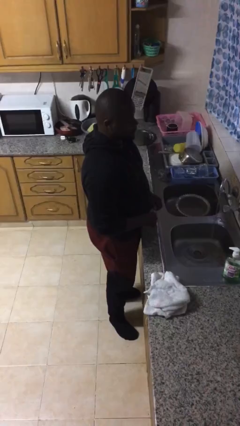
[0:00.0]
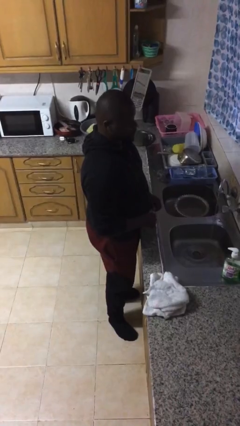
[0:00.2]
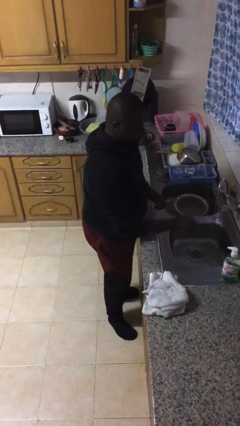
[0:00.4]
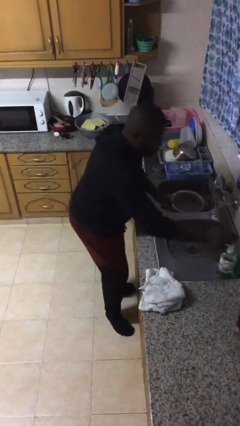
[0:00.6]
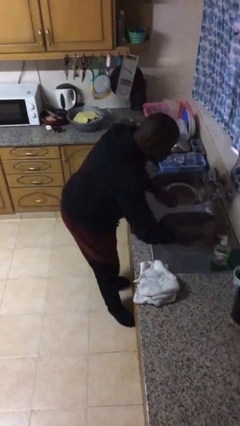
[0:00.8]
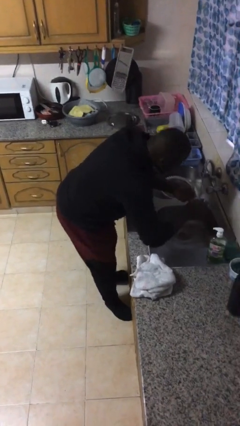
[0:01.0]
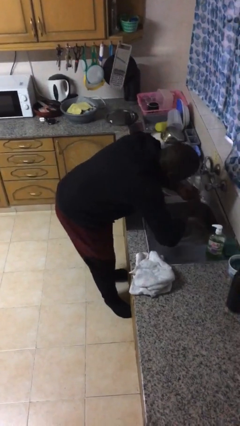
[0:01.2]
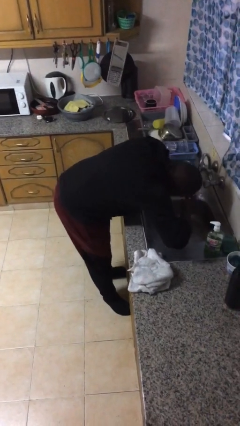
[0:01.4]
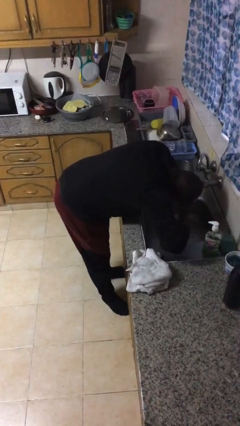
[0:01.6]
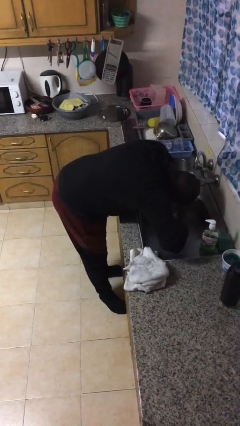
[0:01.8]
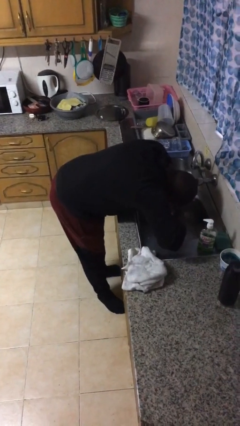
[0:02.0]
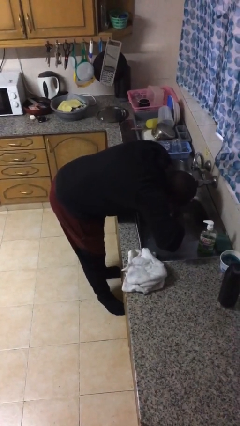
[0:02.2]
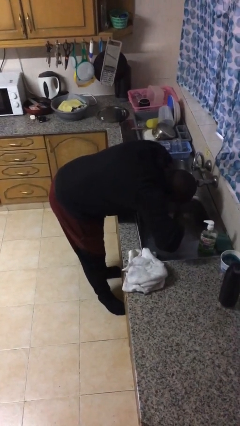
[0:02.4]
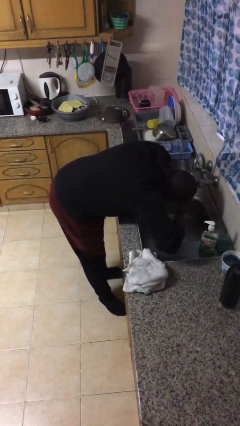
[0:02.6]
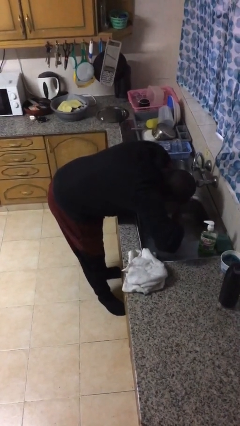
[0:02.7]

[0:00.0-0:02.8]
person washes face

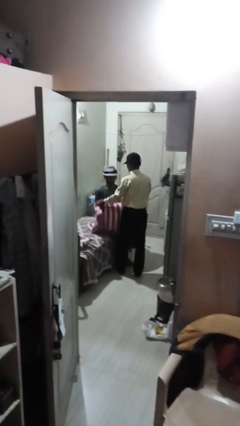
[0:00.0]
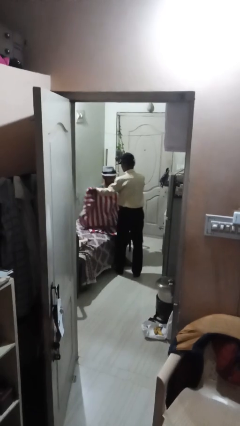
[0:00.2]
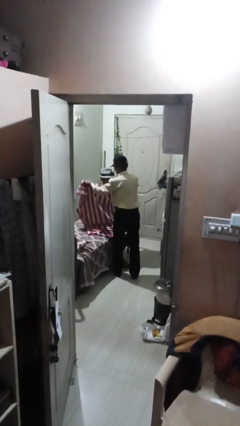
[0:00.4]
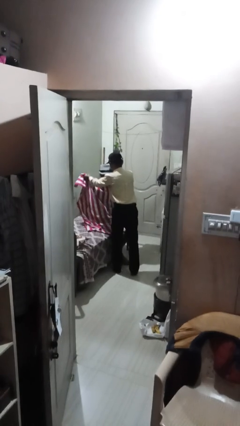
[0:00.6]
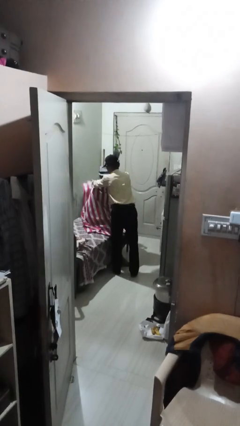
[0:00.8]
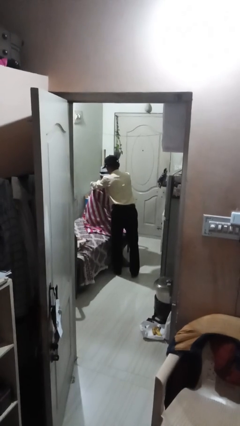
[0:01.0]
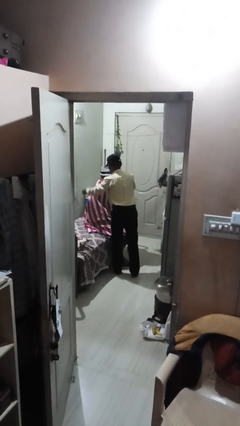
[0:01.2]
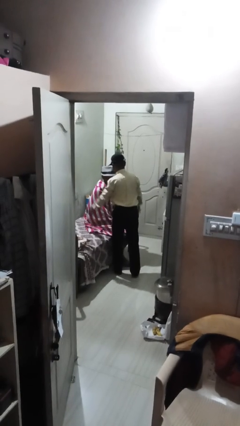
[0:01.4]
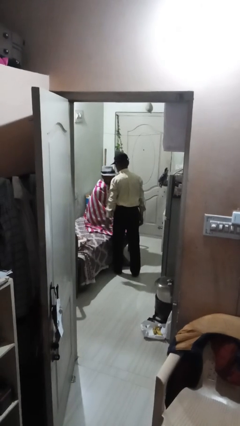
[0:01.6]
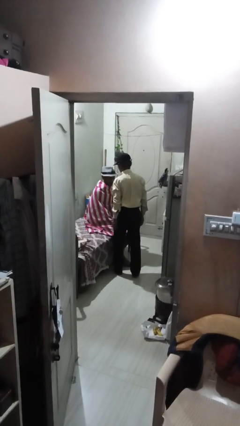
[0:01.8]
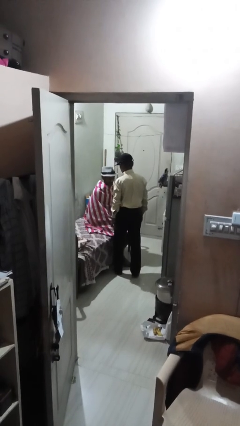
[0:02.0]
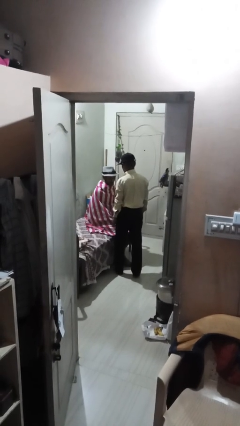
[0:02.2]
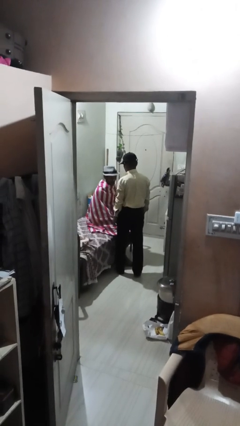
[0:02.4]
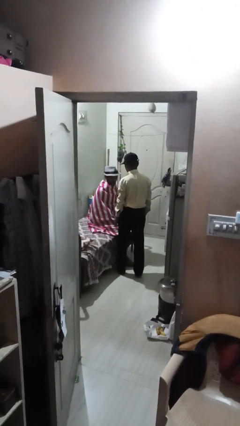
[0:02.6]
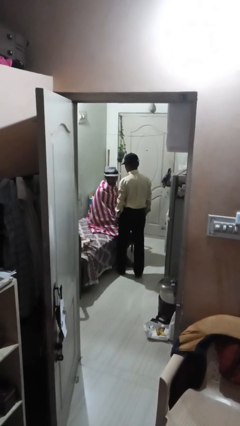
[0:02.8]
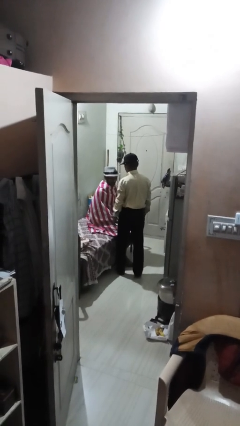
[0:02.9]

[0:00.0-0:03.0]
person covers friend with blanket

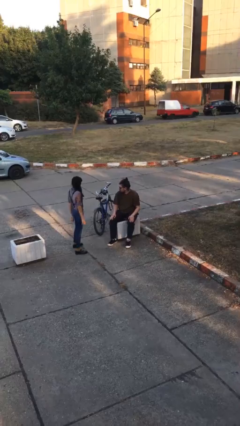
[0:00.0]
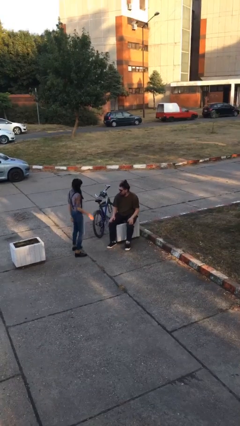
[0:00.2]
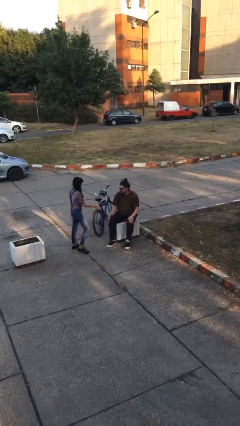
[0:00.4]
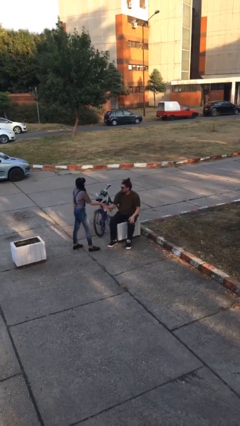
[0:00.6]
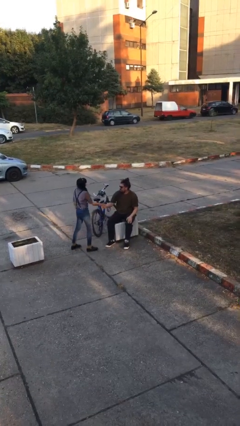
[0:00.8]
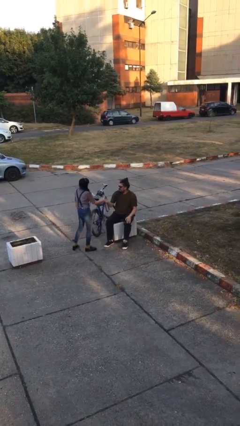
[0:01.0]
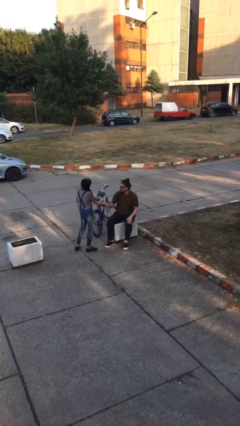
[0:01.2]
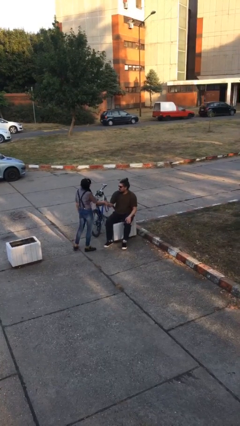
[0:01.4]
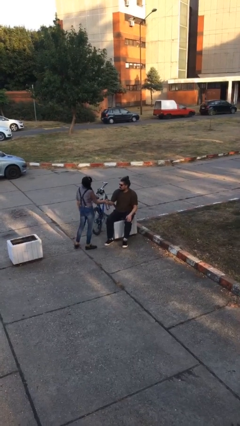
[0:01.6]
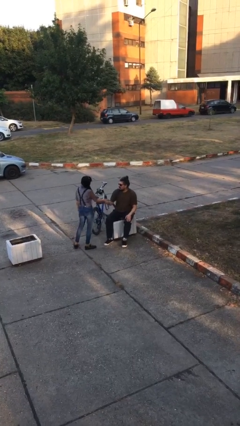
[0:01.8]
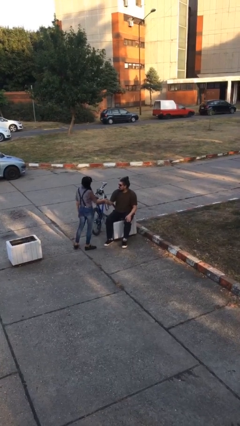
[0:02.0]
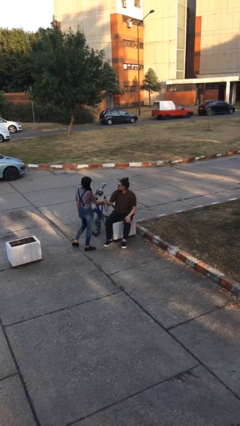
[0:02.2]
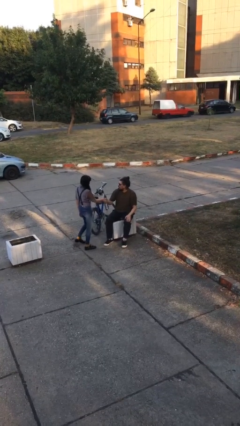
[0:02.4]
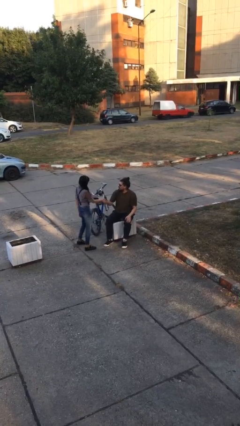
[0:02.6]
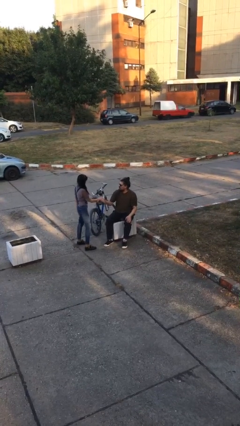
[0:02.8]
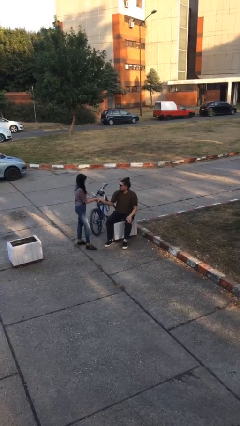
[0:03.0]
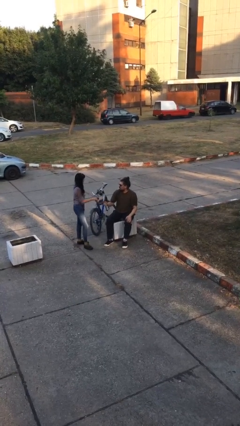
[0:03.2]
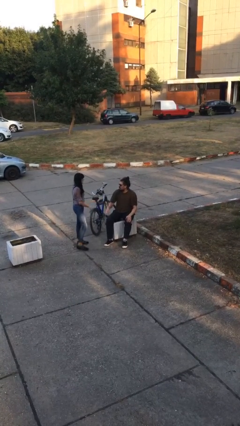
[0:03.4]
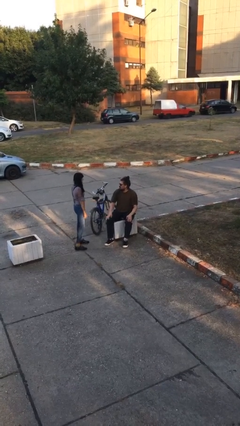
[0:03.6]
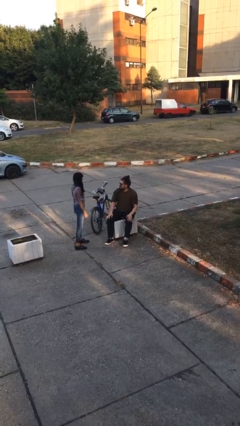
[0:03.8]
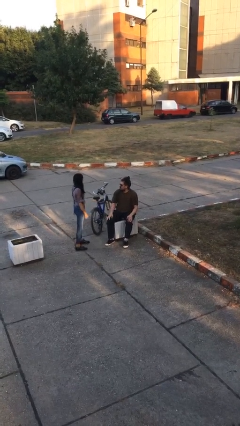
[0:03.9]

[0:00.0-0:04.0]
person shakes hand

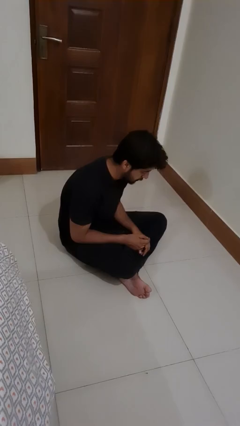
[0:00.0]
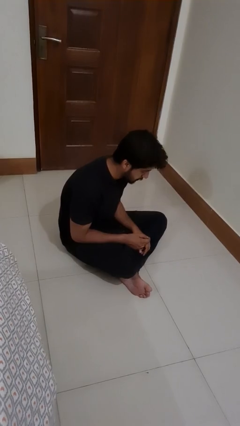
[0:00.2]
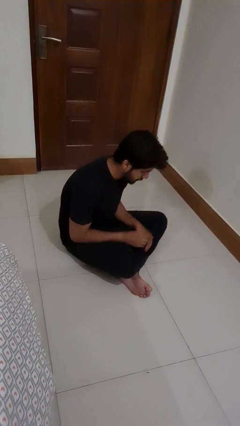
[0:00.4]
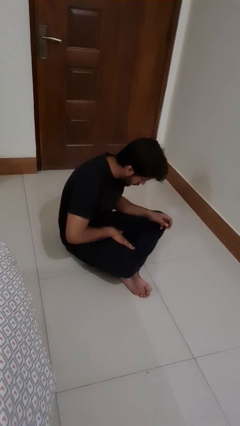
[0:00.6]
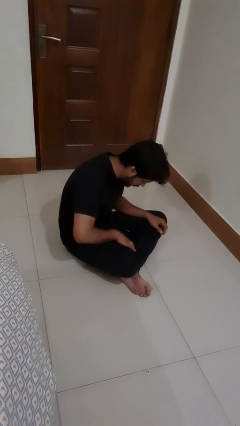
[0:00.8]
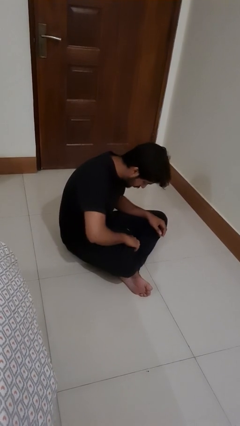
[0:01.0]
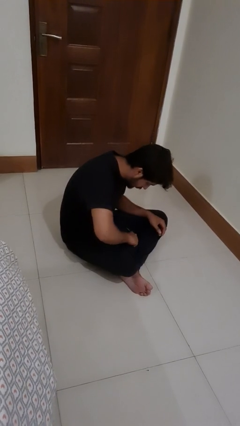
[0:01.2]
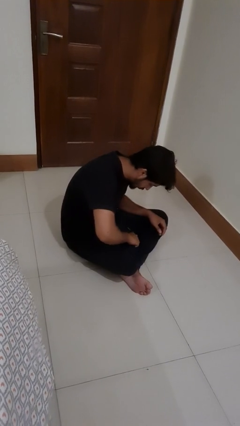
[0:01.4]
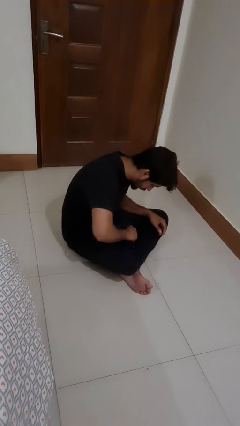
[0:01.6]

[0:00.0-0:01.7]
person swats bug

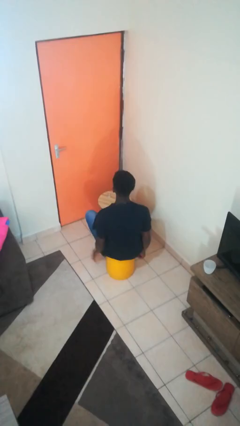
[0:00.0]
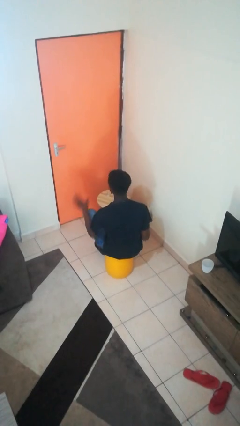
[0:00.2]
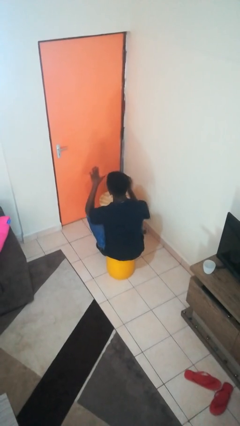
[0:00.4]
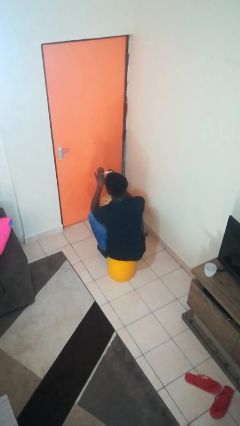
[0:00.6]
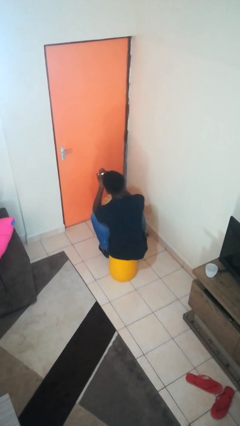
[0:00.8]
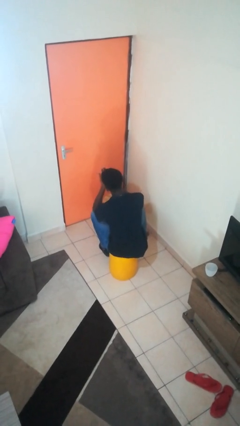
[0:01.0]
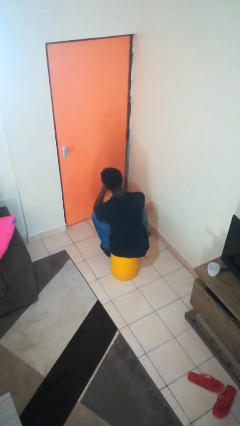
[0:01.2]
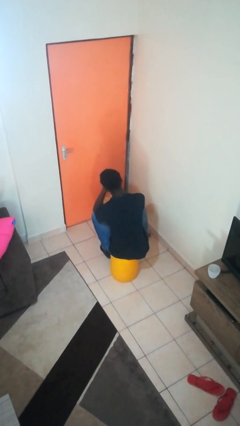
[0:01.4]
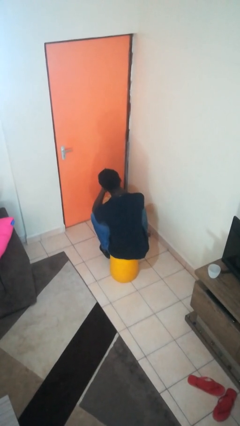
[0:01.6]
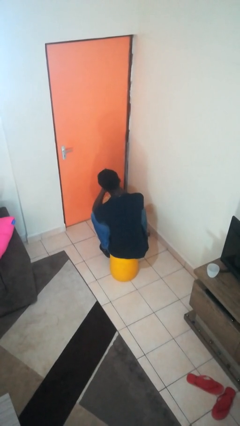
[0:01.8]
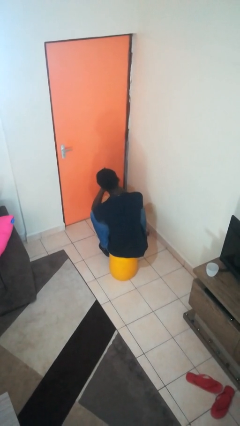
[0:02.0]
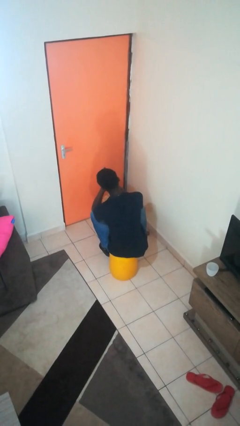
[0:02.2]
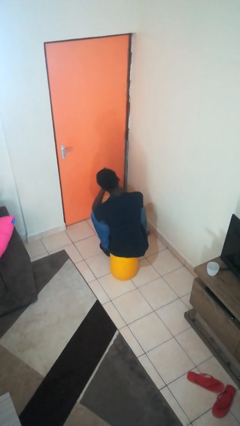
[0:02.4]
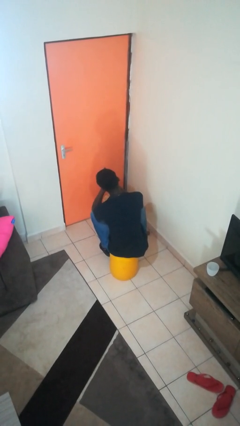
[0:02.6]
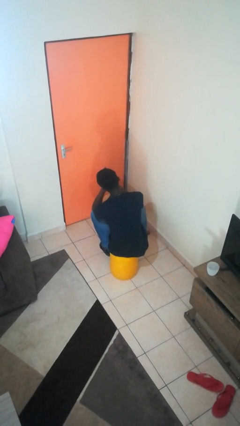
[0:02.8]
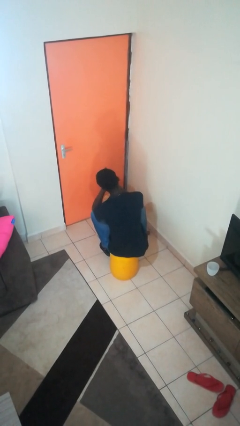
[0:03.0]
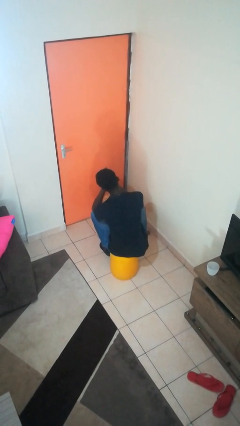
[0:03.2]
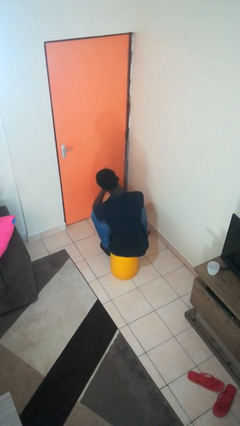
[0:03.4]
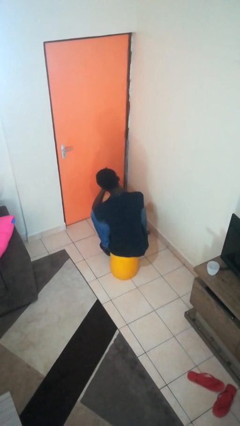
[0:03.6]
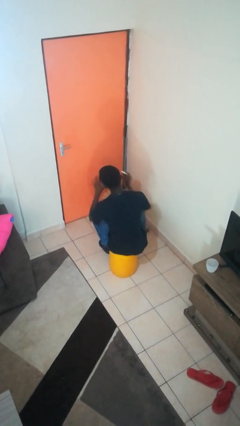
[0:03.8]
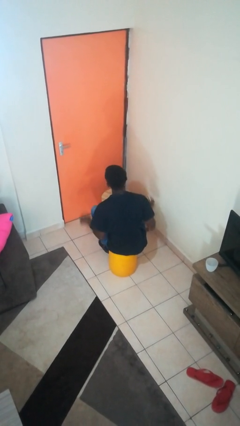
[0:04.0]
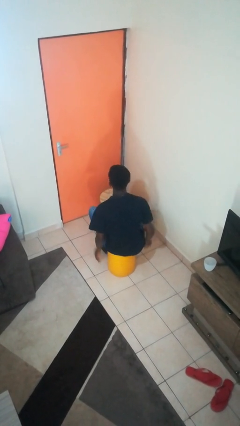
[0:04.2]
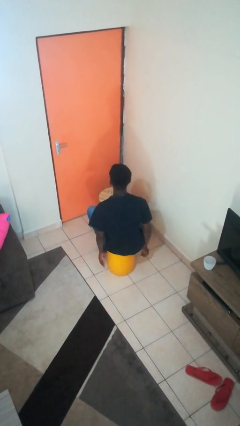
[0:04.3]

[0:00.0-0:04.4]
person paints fingernails

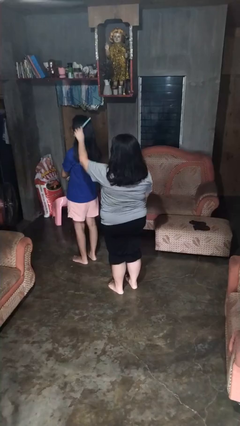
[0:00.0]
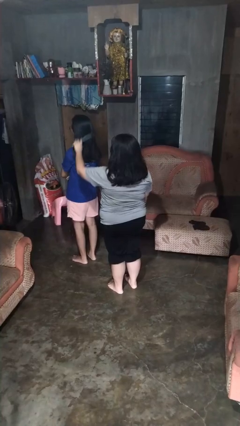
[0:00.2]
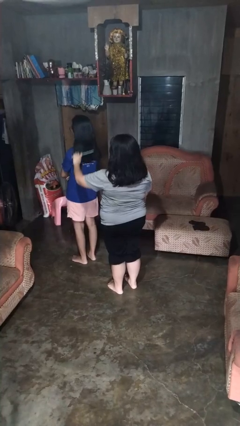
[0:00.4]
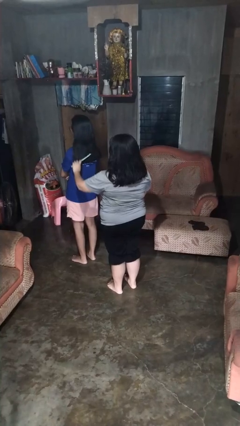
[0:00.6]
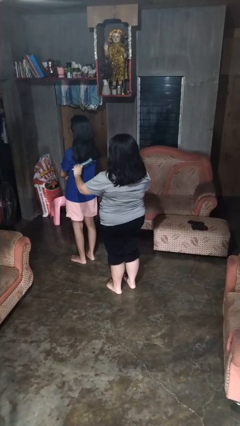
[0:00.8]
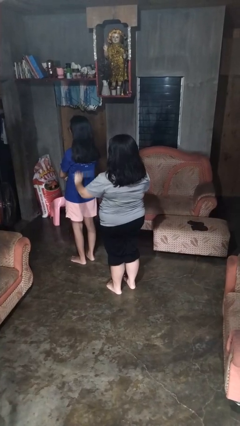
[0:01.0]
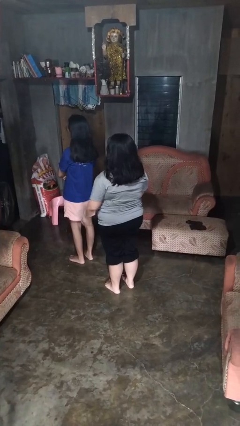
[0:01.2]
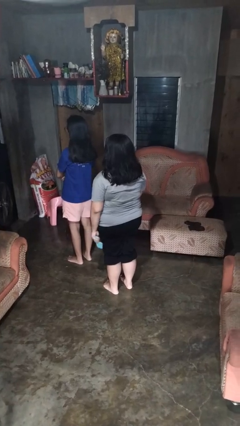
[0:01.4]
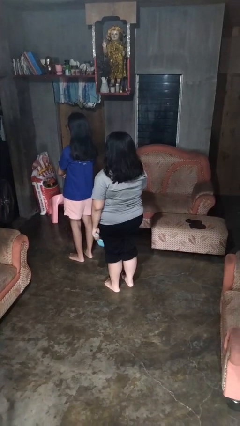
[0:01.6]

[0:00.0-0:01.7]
person brushes hair of person
